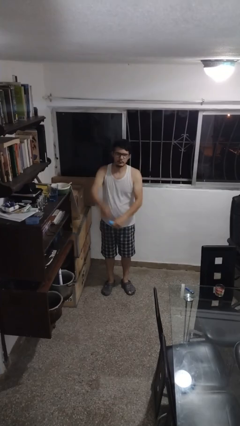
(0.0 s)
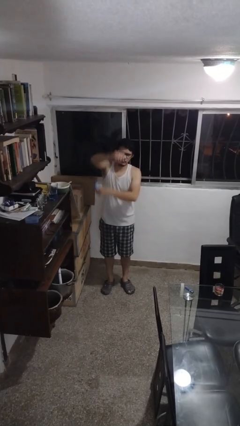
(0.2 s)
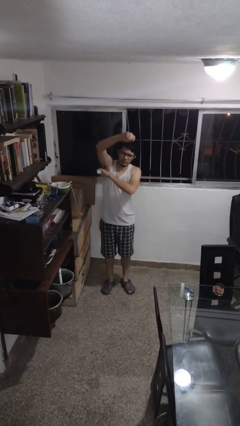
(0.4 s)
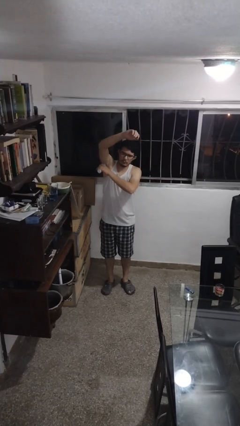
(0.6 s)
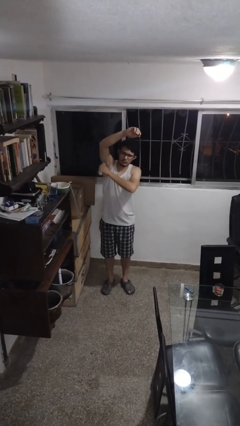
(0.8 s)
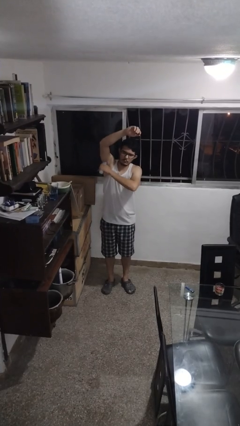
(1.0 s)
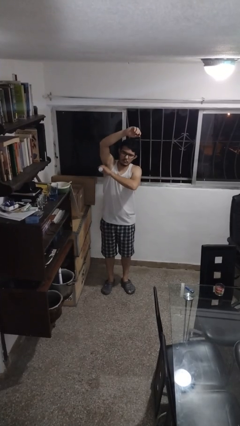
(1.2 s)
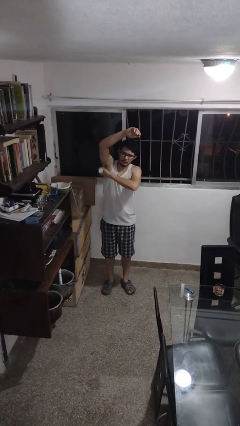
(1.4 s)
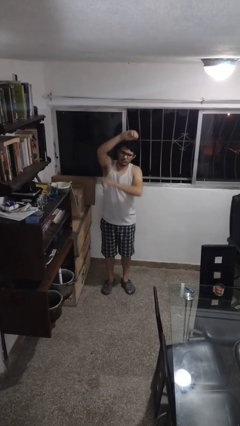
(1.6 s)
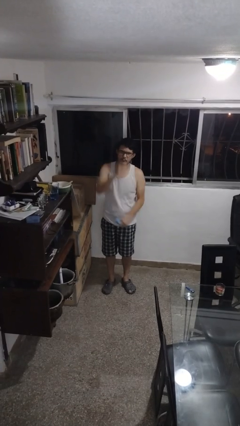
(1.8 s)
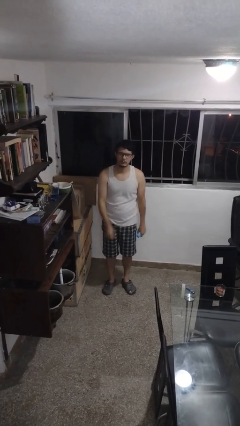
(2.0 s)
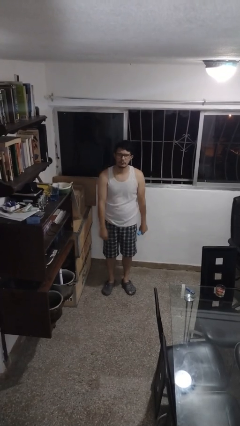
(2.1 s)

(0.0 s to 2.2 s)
person applies deodorant

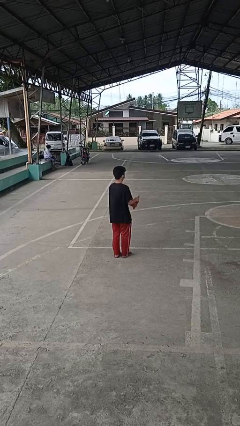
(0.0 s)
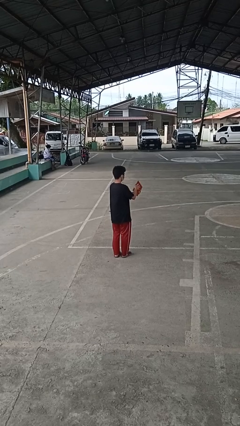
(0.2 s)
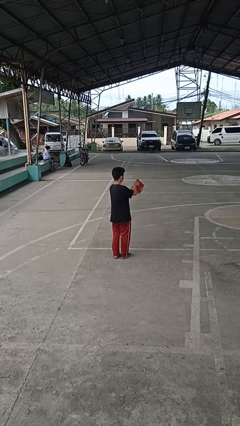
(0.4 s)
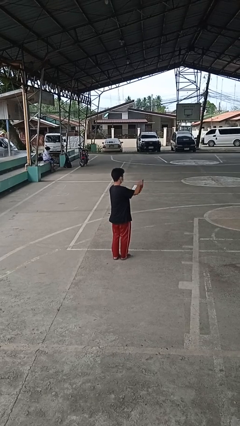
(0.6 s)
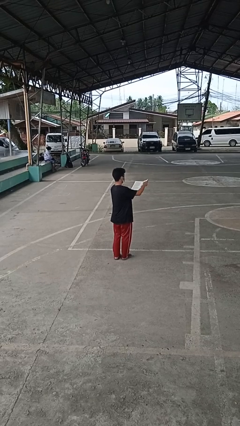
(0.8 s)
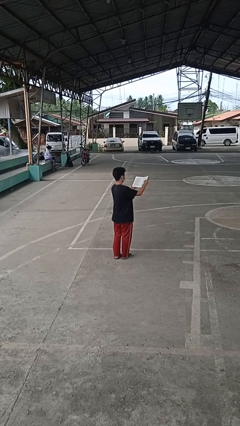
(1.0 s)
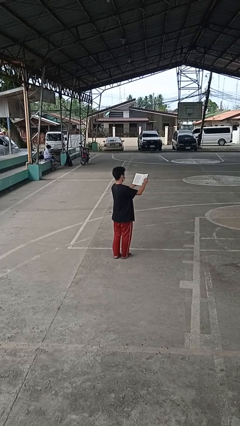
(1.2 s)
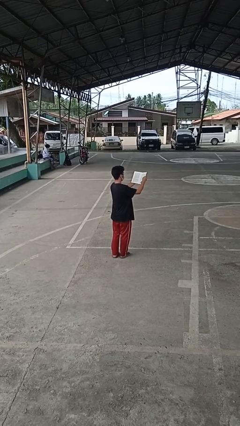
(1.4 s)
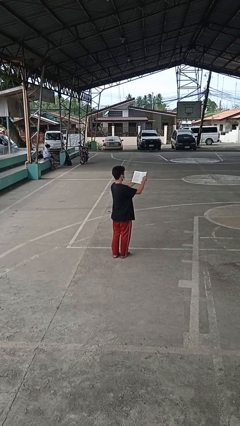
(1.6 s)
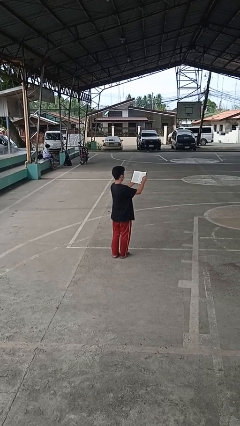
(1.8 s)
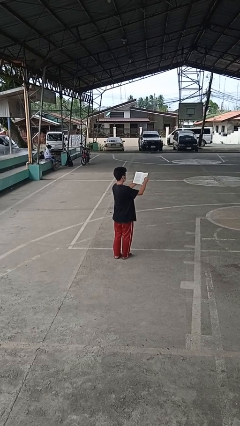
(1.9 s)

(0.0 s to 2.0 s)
person reads book

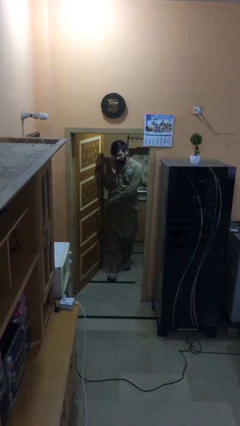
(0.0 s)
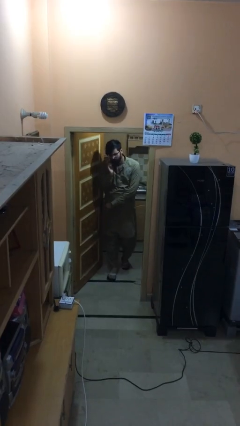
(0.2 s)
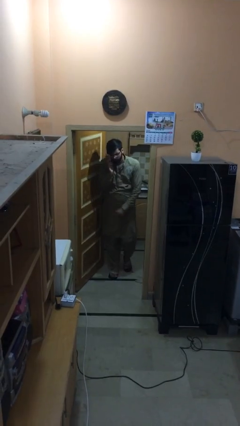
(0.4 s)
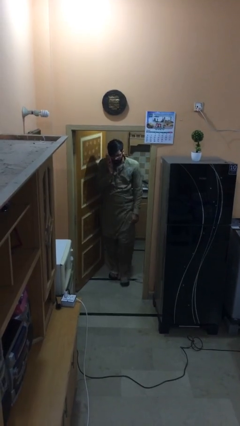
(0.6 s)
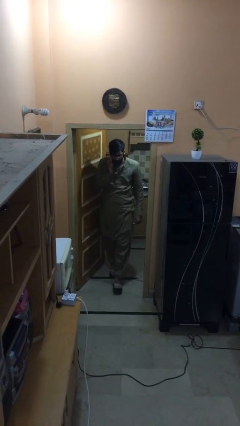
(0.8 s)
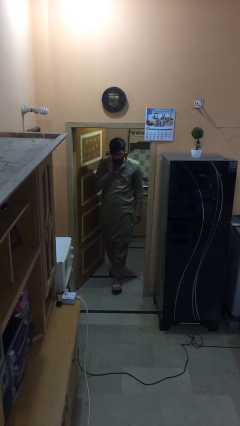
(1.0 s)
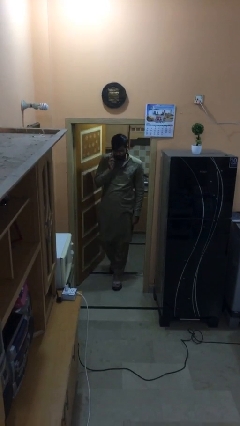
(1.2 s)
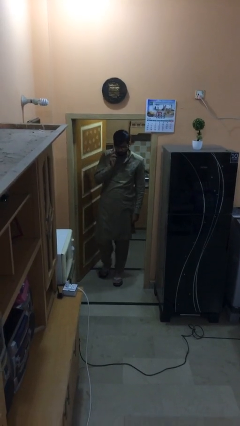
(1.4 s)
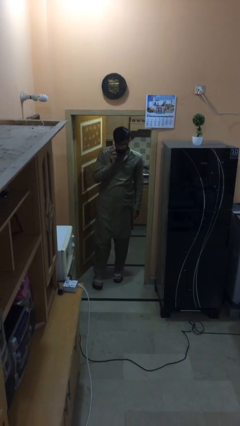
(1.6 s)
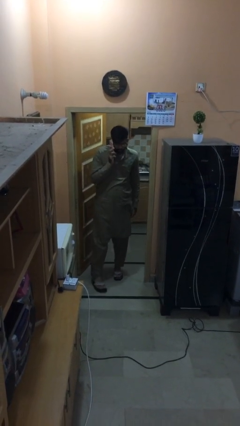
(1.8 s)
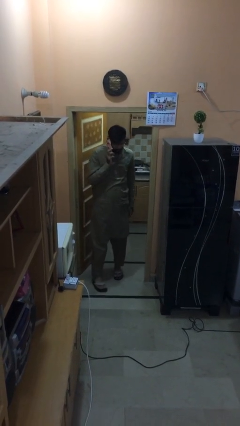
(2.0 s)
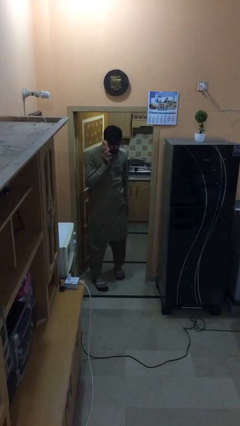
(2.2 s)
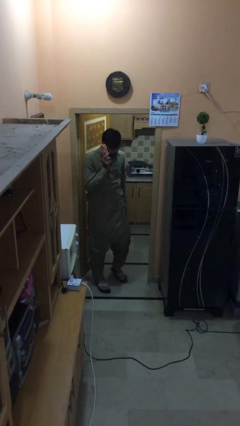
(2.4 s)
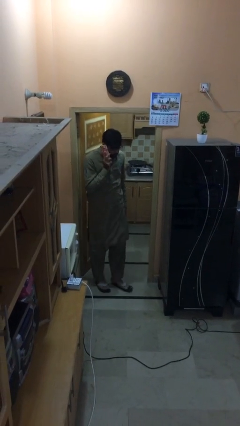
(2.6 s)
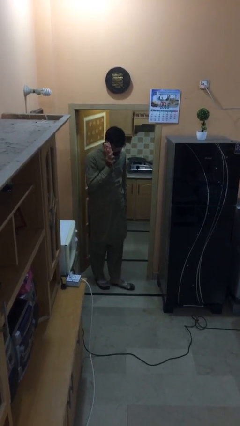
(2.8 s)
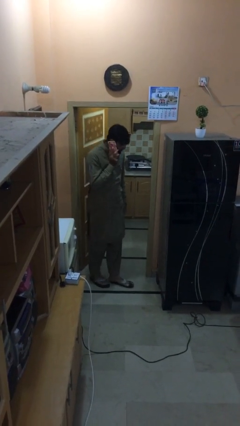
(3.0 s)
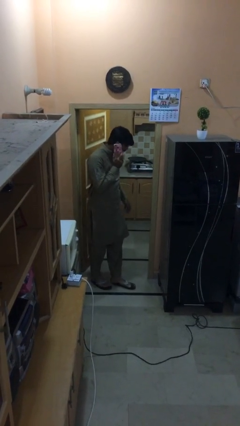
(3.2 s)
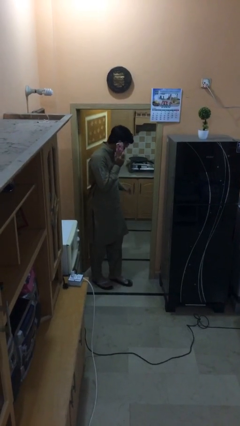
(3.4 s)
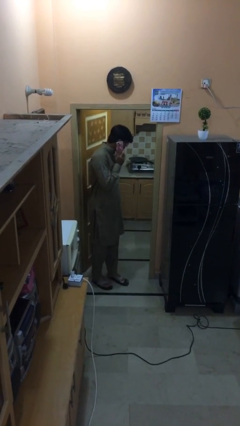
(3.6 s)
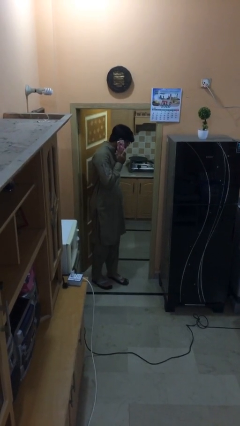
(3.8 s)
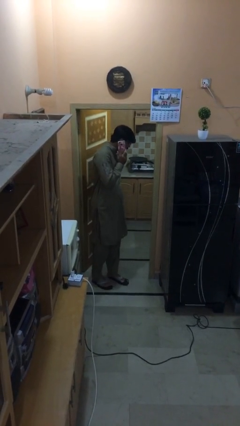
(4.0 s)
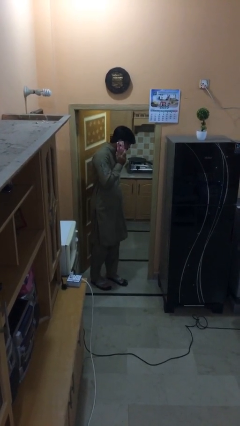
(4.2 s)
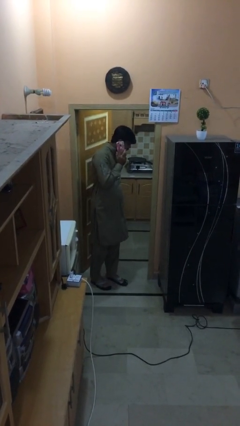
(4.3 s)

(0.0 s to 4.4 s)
person enters scene through structure

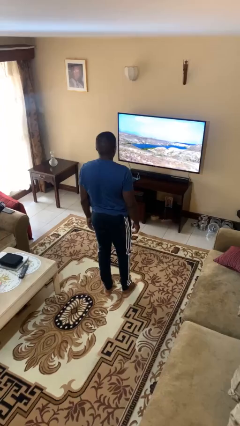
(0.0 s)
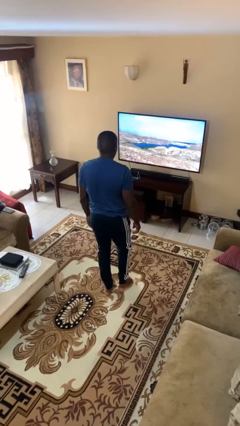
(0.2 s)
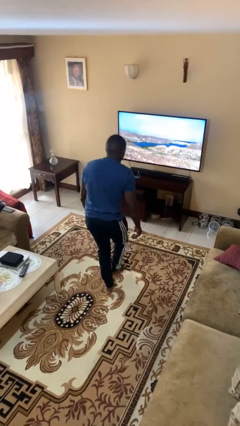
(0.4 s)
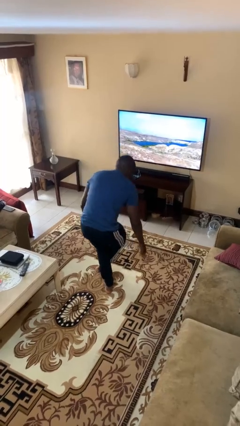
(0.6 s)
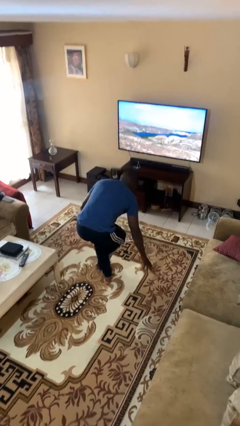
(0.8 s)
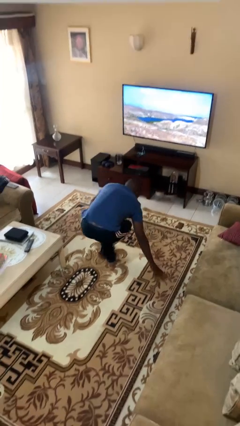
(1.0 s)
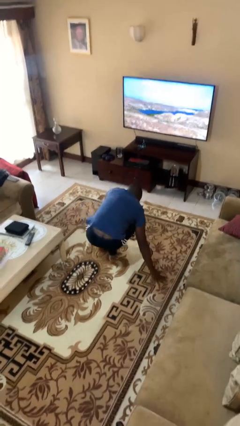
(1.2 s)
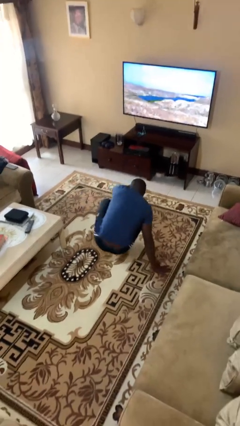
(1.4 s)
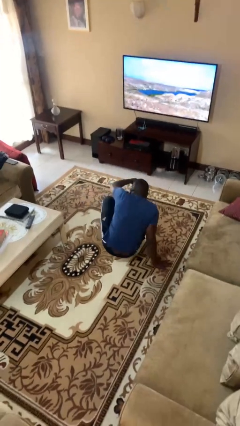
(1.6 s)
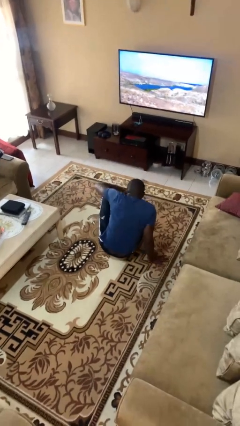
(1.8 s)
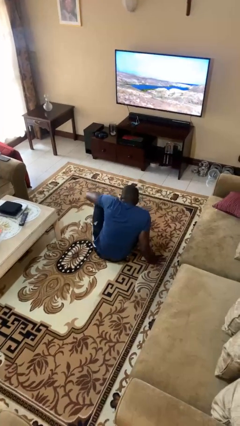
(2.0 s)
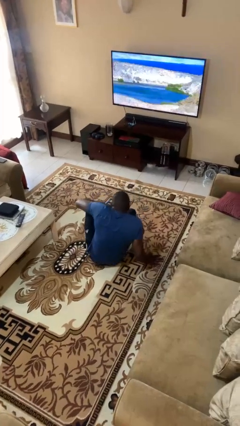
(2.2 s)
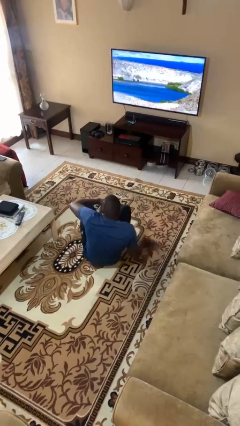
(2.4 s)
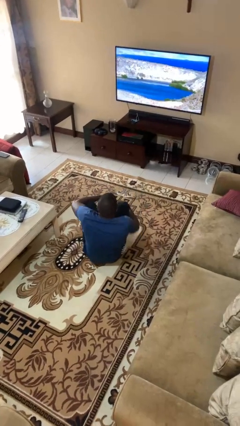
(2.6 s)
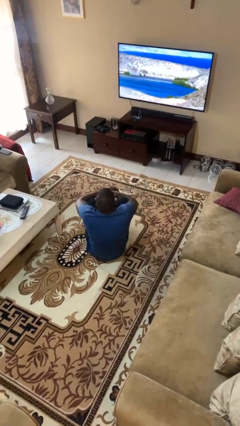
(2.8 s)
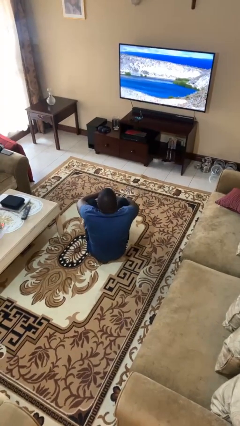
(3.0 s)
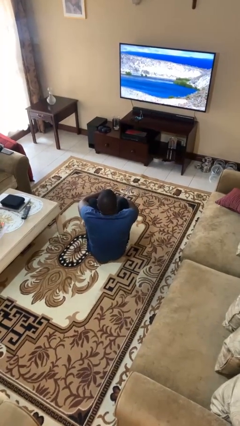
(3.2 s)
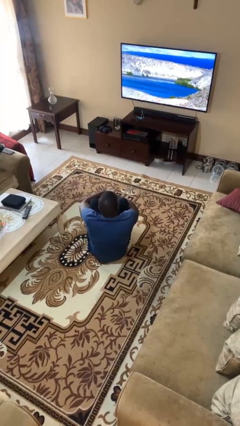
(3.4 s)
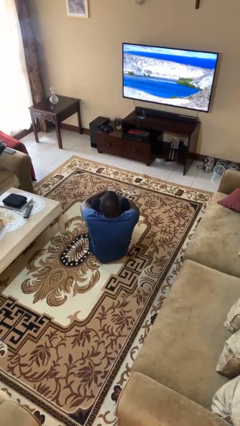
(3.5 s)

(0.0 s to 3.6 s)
person sits crisscross

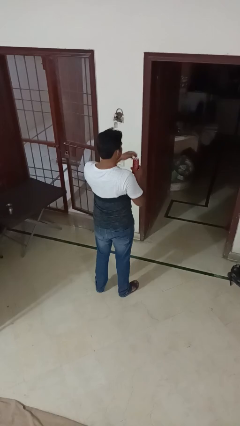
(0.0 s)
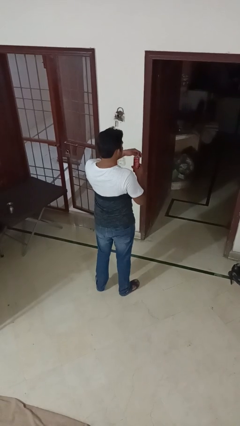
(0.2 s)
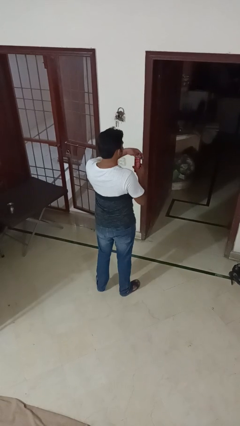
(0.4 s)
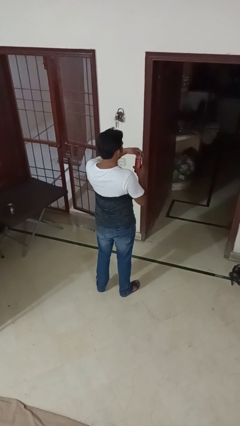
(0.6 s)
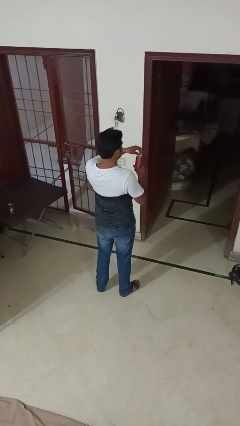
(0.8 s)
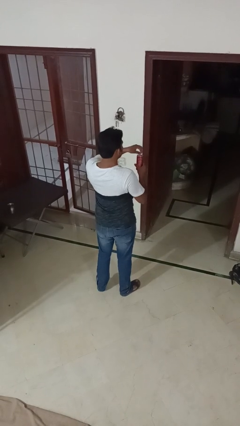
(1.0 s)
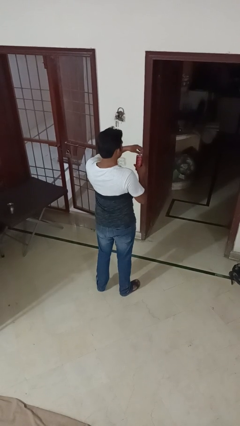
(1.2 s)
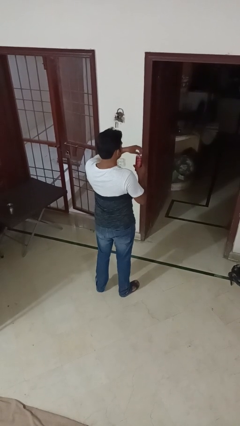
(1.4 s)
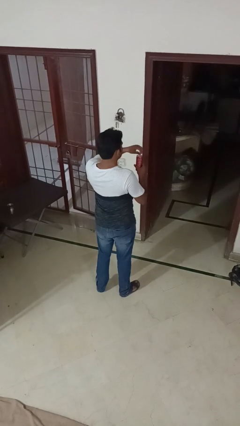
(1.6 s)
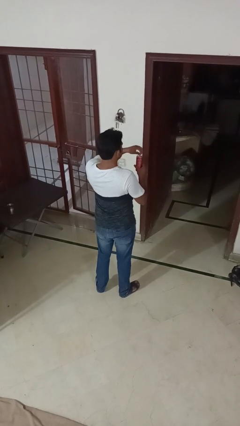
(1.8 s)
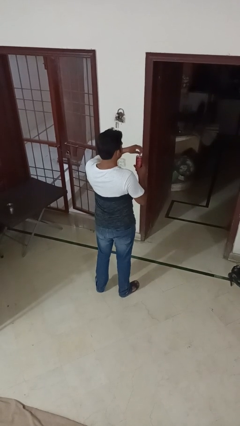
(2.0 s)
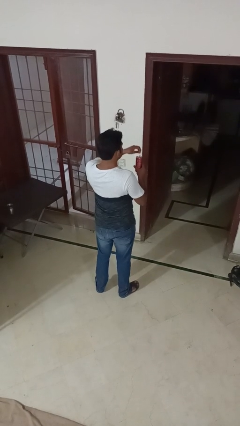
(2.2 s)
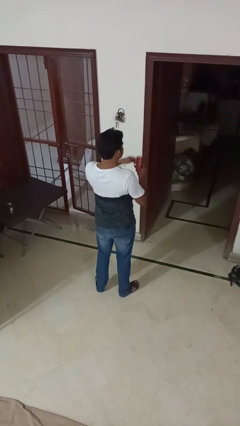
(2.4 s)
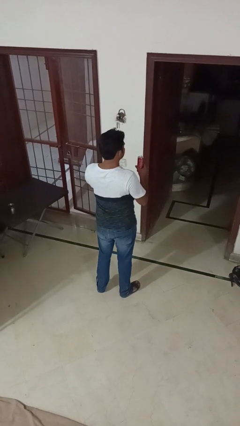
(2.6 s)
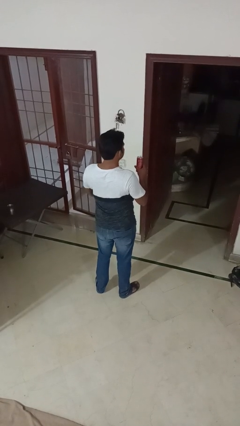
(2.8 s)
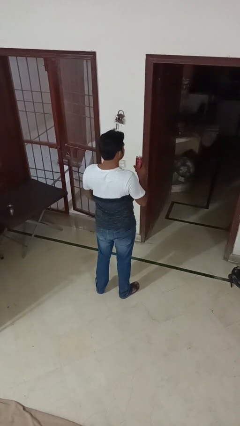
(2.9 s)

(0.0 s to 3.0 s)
person opens beverage can

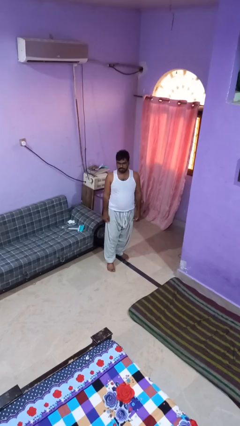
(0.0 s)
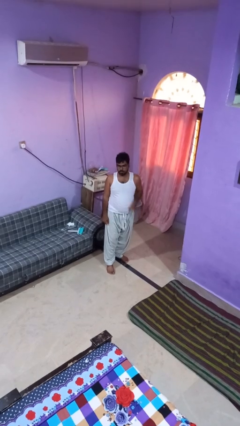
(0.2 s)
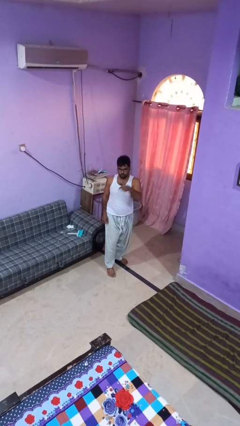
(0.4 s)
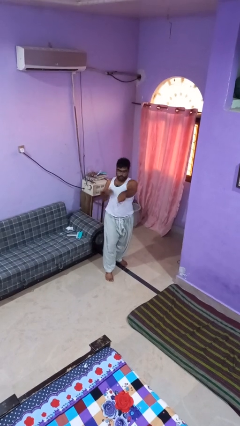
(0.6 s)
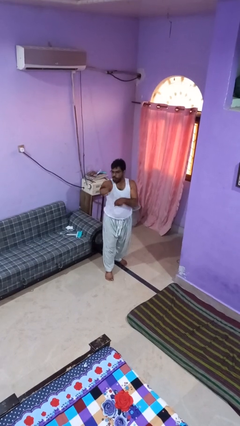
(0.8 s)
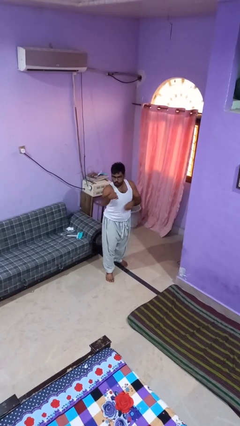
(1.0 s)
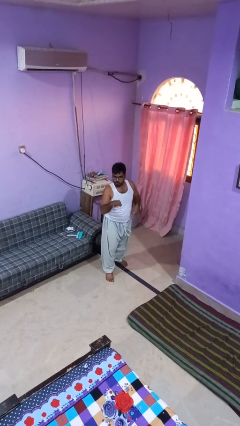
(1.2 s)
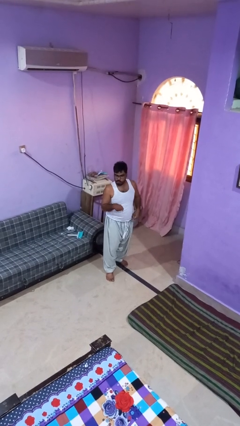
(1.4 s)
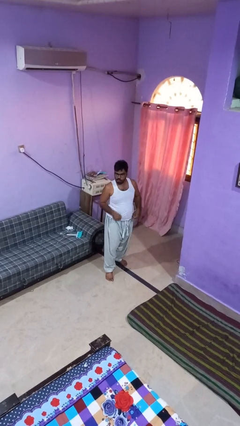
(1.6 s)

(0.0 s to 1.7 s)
person punches

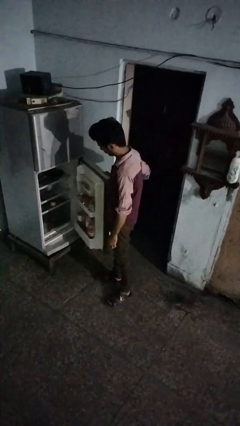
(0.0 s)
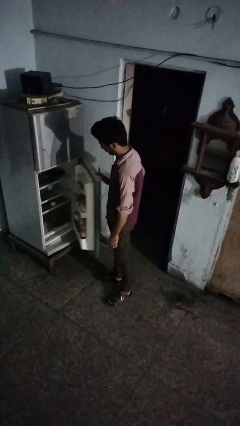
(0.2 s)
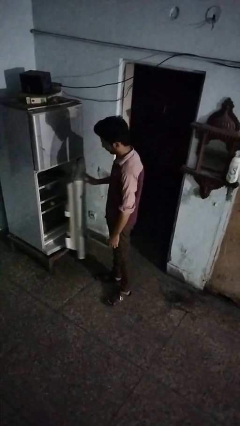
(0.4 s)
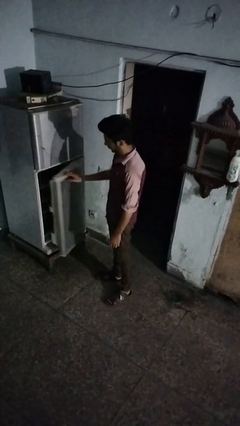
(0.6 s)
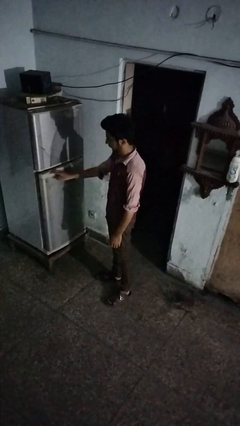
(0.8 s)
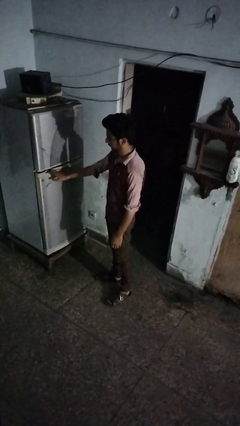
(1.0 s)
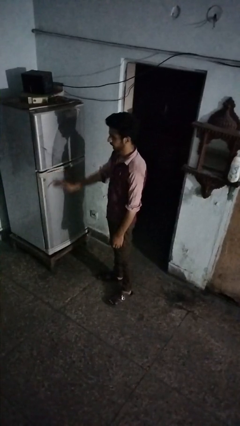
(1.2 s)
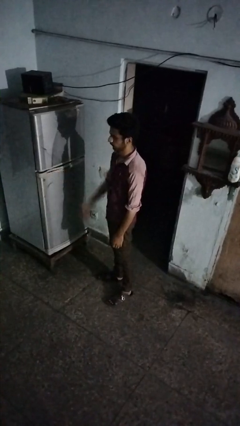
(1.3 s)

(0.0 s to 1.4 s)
person closes refrigerator
